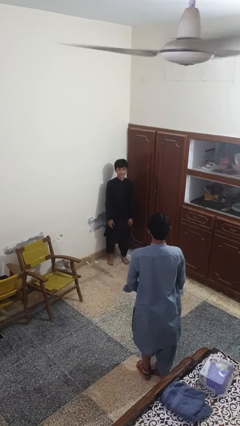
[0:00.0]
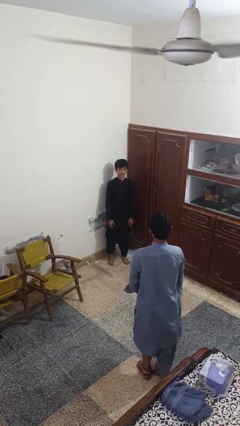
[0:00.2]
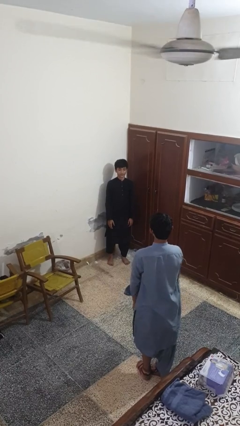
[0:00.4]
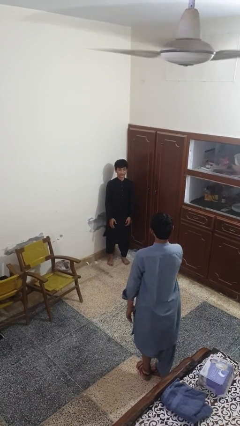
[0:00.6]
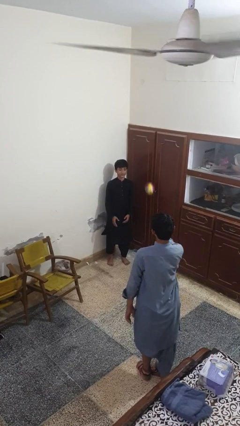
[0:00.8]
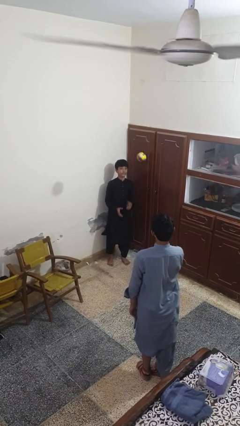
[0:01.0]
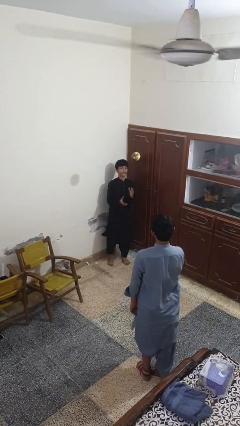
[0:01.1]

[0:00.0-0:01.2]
person catches object from person

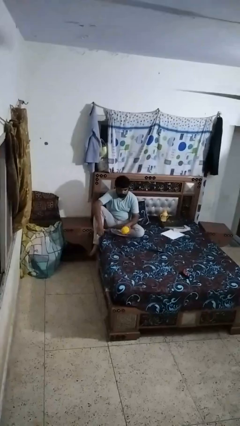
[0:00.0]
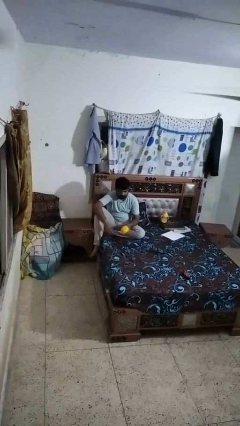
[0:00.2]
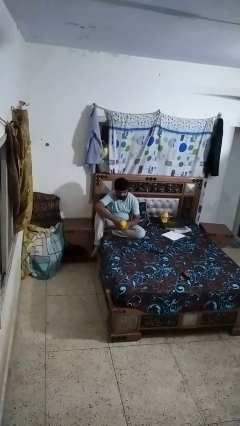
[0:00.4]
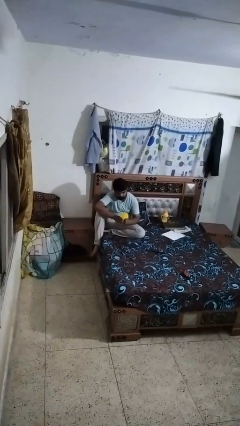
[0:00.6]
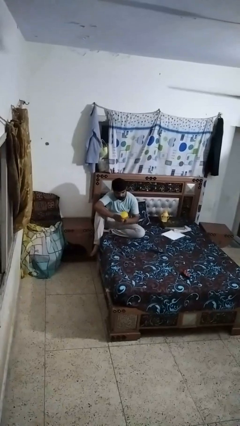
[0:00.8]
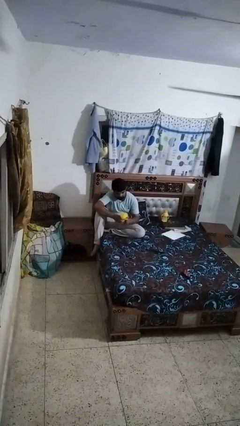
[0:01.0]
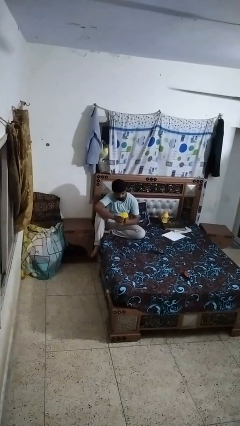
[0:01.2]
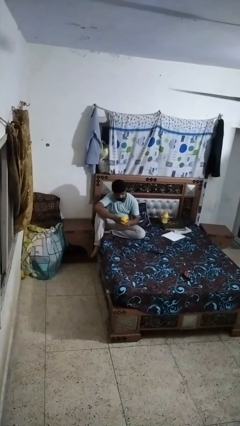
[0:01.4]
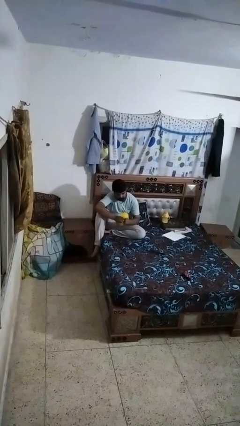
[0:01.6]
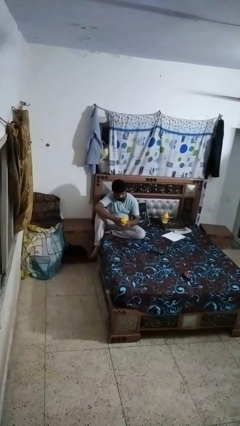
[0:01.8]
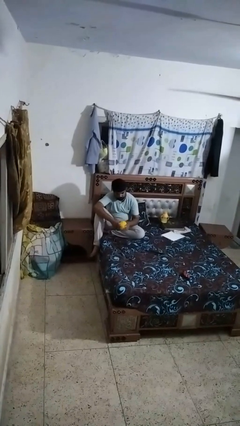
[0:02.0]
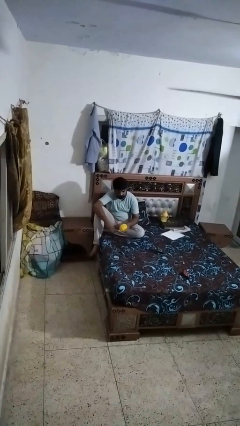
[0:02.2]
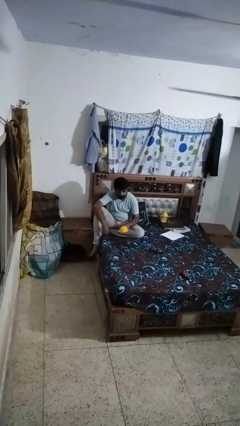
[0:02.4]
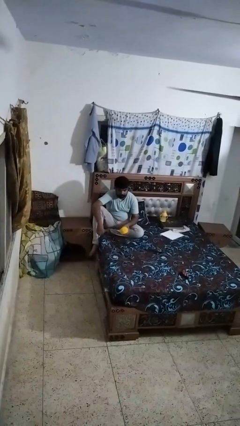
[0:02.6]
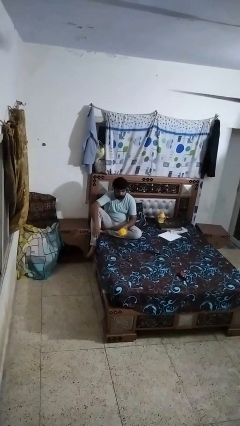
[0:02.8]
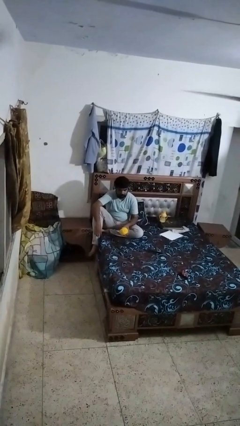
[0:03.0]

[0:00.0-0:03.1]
person squeezes object

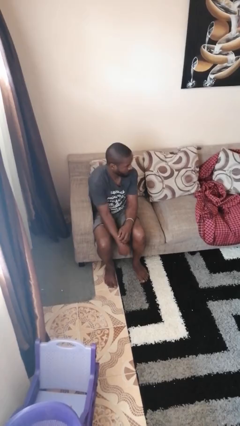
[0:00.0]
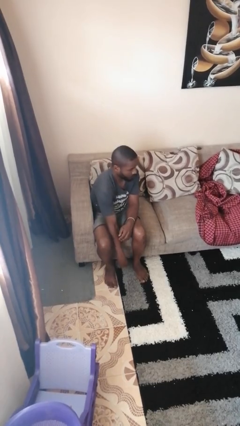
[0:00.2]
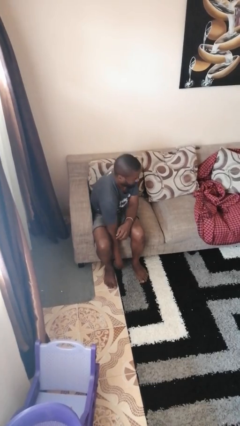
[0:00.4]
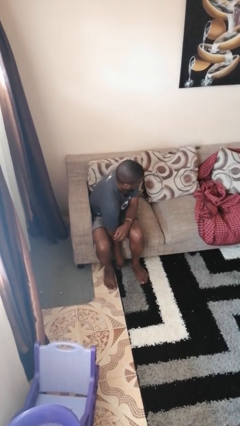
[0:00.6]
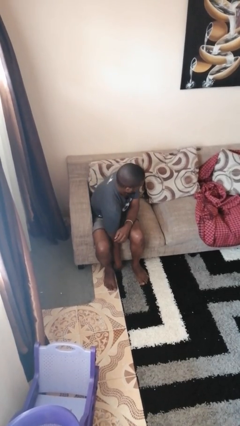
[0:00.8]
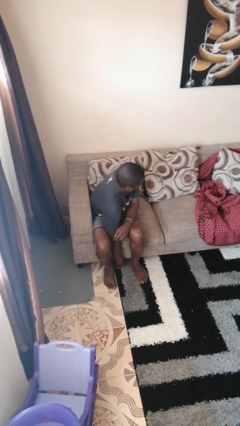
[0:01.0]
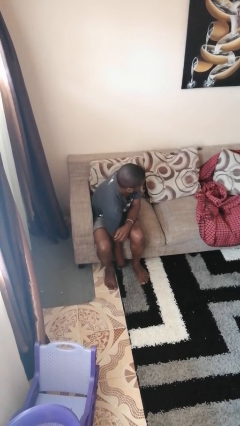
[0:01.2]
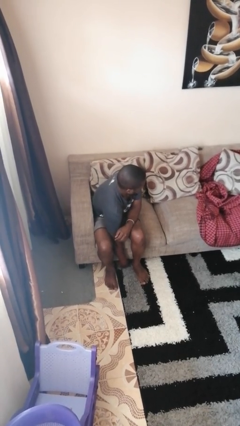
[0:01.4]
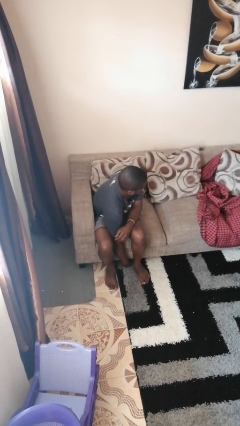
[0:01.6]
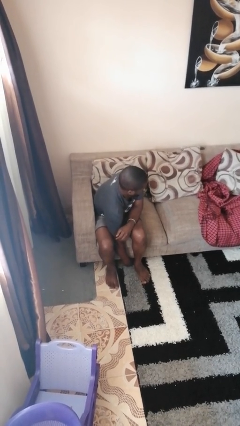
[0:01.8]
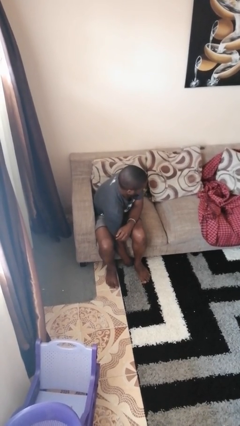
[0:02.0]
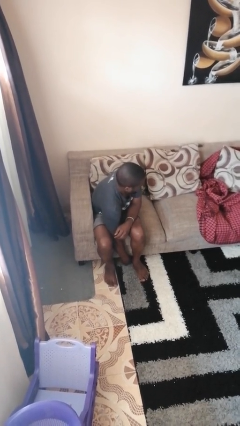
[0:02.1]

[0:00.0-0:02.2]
person searches under couch

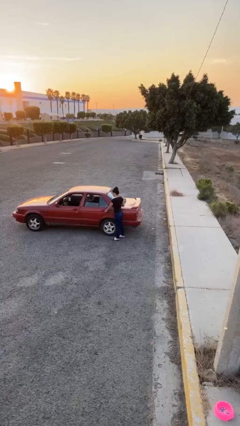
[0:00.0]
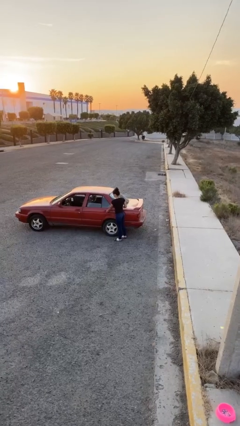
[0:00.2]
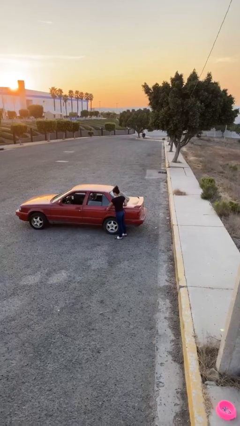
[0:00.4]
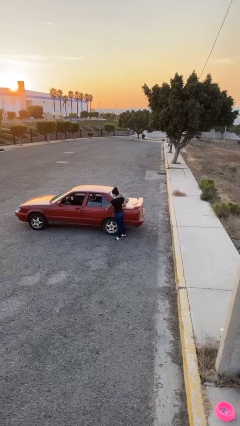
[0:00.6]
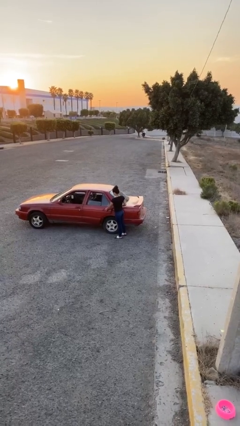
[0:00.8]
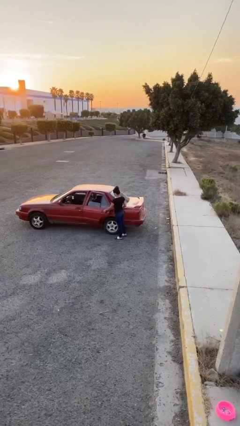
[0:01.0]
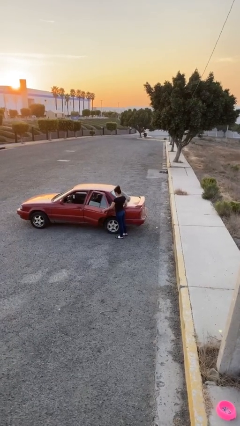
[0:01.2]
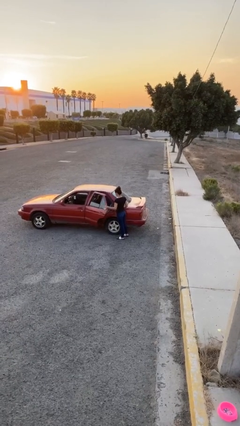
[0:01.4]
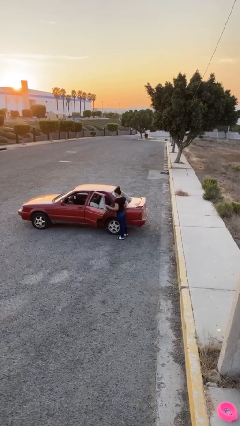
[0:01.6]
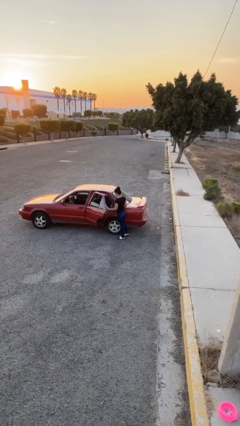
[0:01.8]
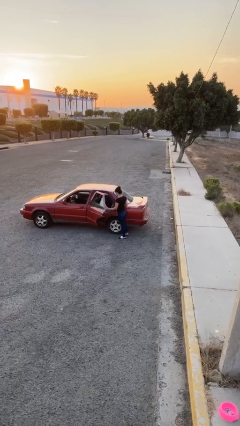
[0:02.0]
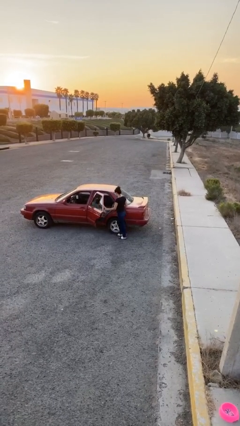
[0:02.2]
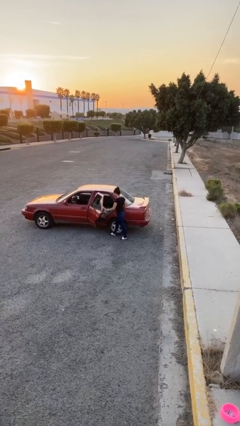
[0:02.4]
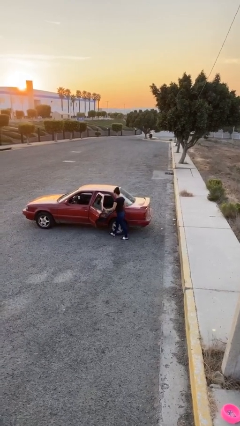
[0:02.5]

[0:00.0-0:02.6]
person opens car door

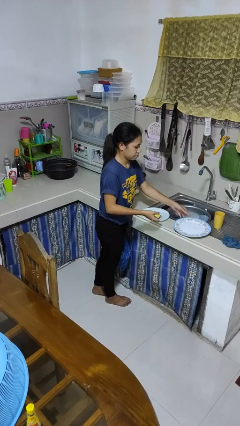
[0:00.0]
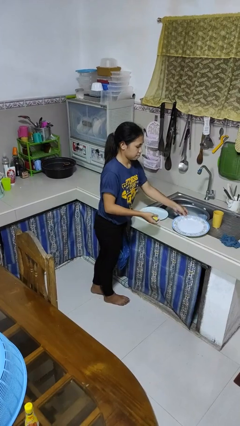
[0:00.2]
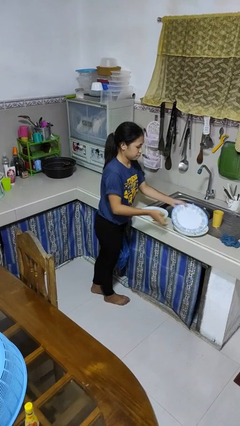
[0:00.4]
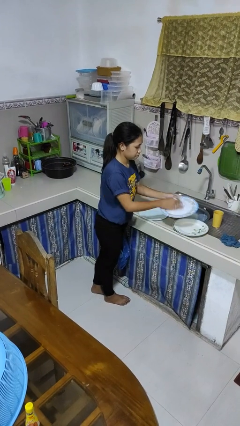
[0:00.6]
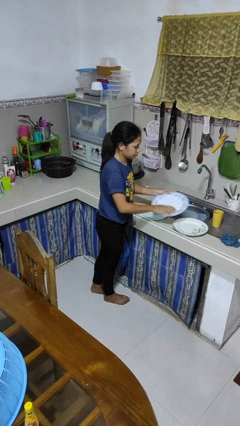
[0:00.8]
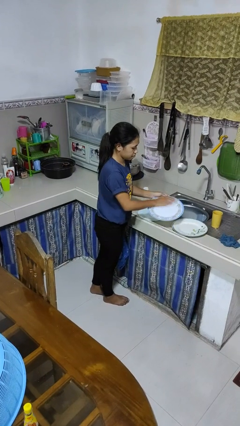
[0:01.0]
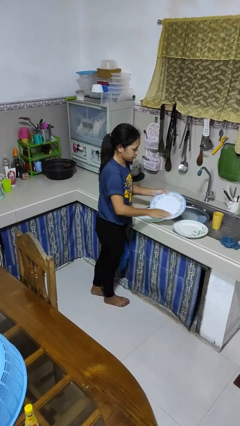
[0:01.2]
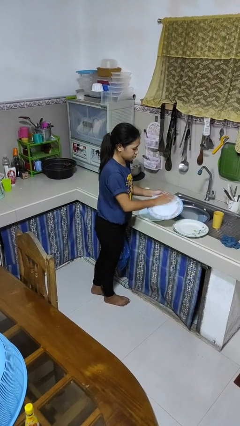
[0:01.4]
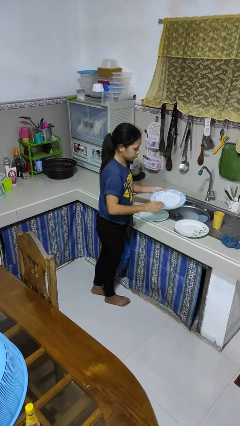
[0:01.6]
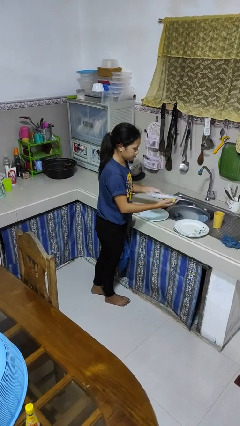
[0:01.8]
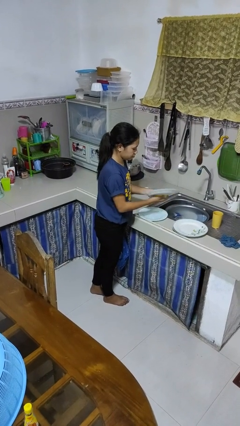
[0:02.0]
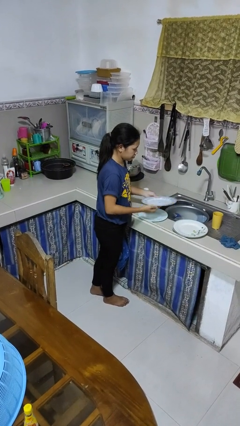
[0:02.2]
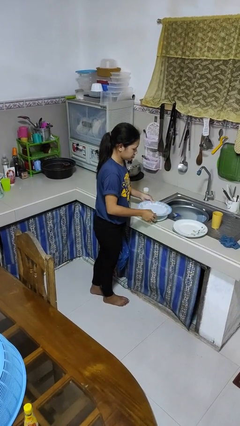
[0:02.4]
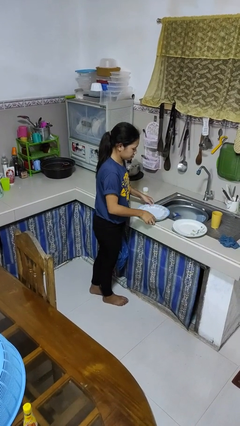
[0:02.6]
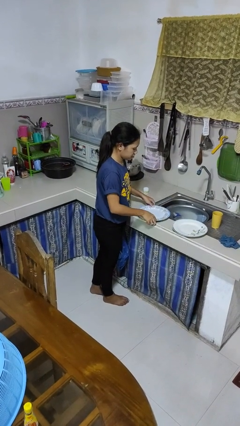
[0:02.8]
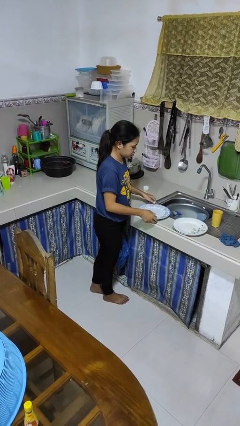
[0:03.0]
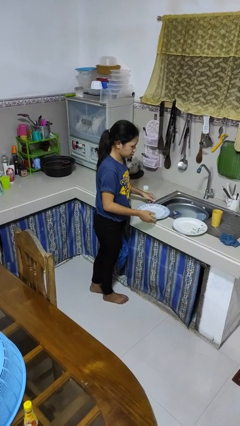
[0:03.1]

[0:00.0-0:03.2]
person washes dish

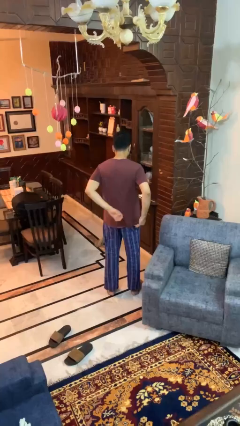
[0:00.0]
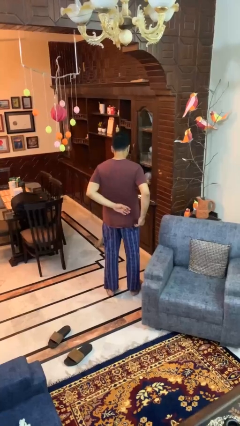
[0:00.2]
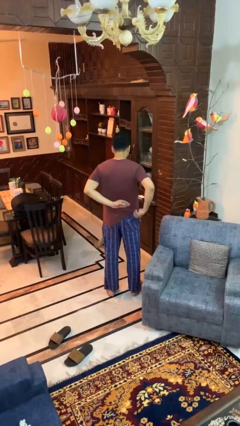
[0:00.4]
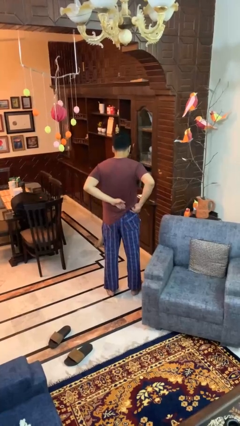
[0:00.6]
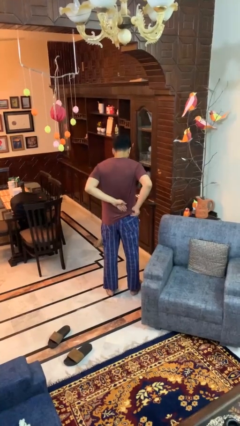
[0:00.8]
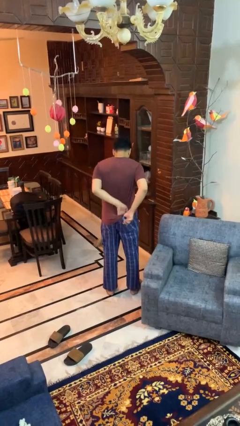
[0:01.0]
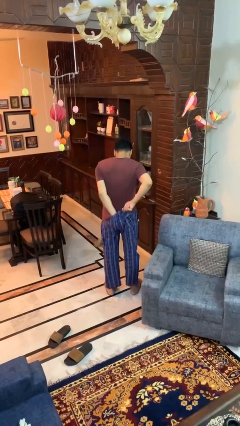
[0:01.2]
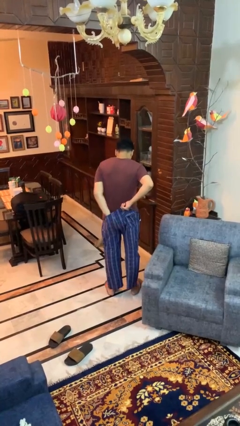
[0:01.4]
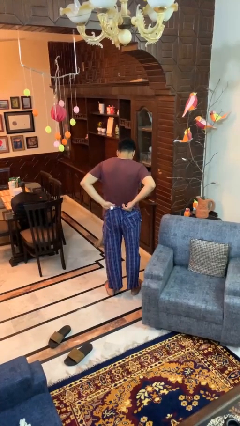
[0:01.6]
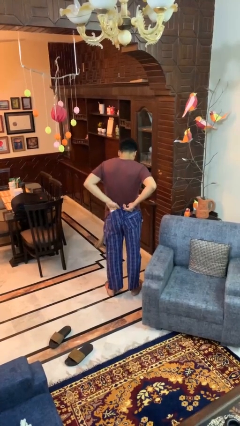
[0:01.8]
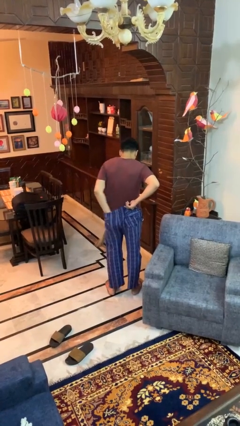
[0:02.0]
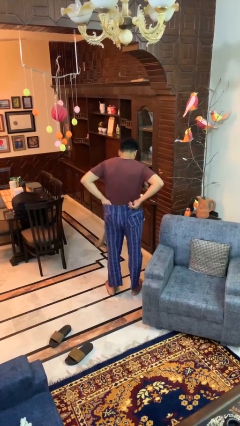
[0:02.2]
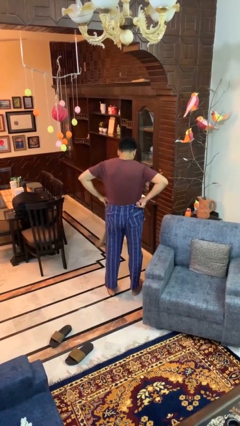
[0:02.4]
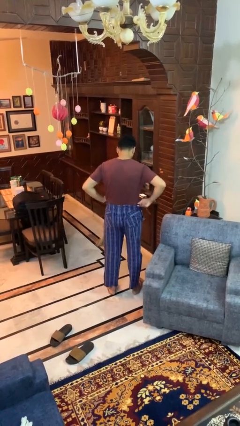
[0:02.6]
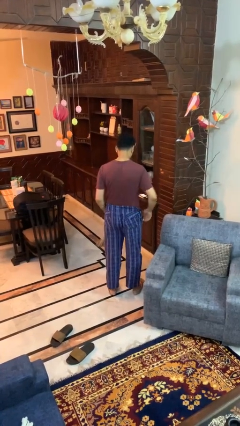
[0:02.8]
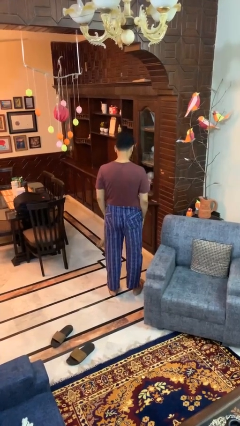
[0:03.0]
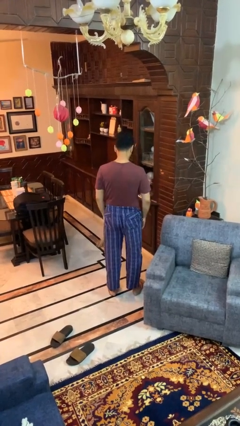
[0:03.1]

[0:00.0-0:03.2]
person tucks in shirt

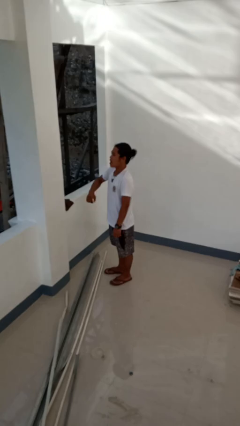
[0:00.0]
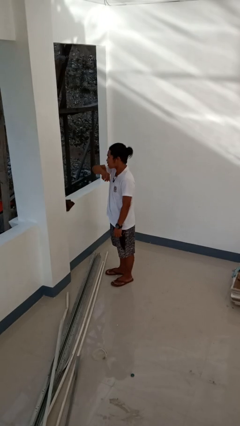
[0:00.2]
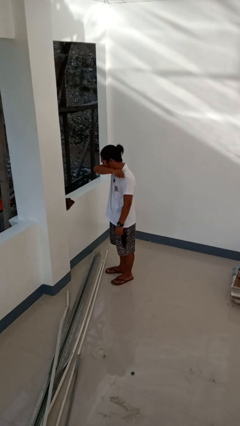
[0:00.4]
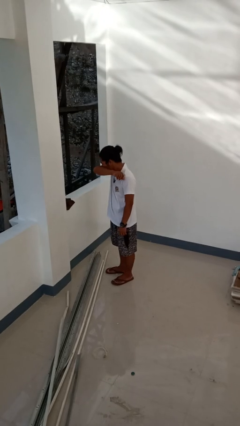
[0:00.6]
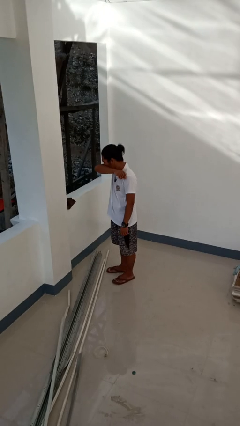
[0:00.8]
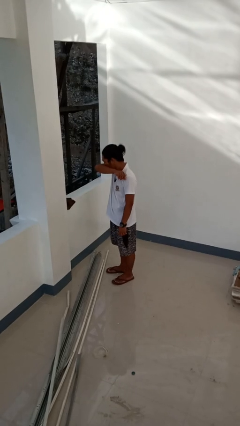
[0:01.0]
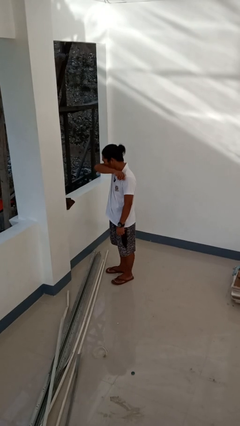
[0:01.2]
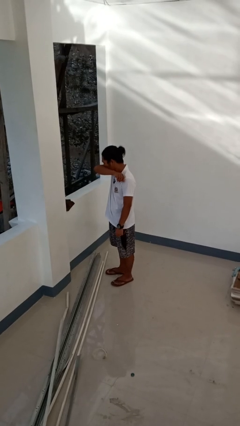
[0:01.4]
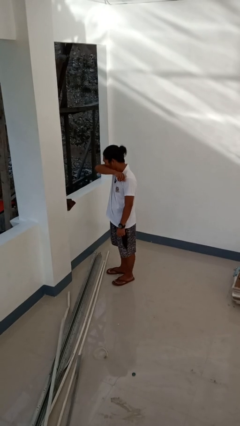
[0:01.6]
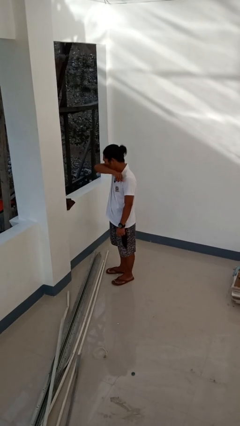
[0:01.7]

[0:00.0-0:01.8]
person sneezes into arm

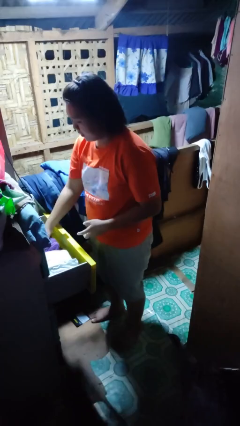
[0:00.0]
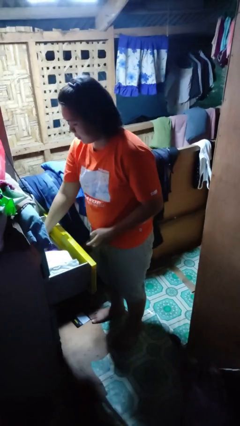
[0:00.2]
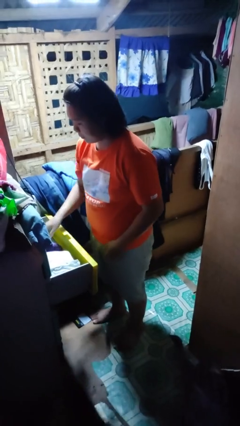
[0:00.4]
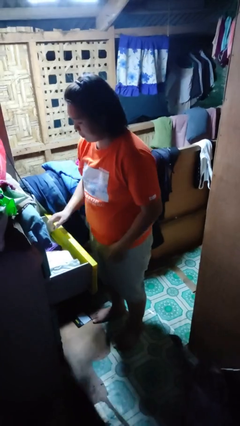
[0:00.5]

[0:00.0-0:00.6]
person puts clothes into dresser
